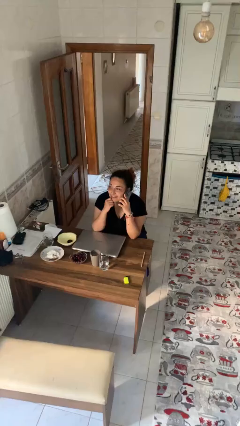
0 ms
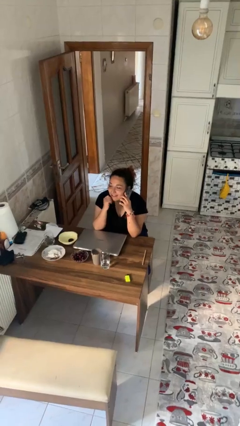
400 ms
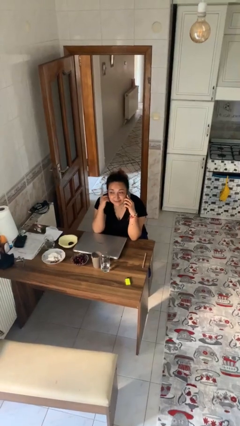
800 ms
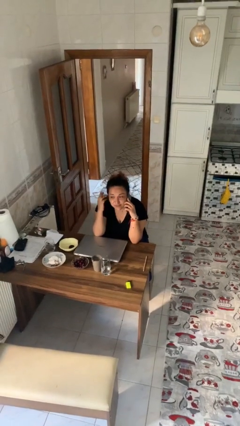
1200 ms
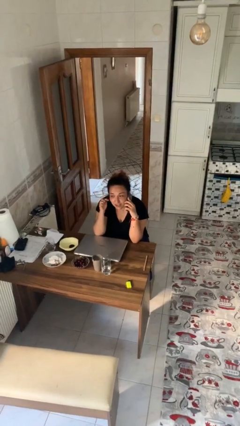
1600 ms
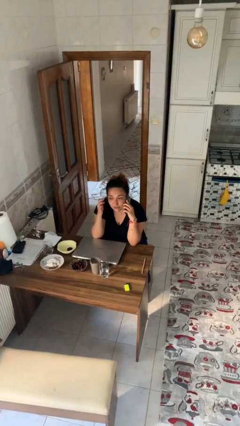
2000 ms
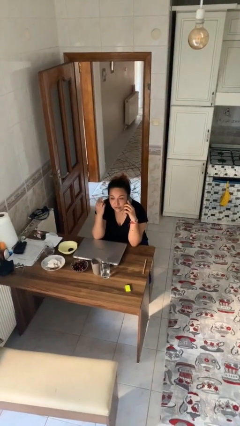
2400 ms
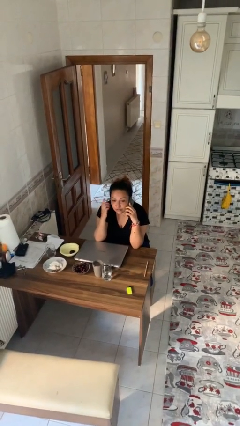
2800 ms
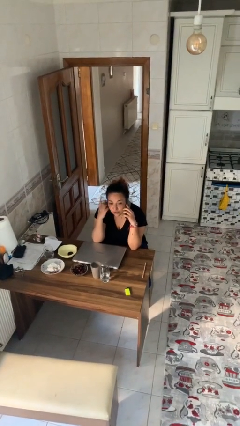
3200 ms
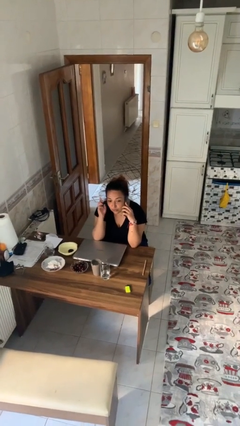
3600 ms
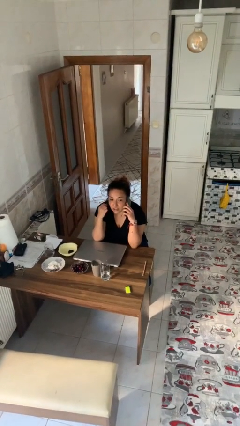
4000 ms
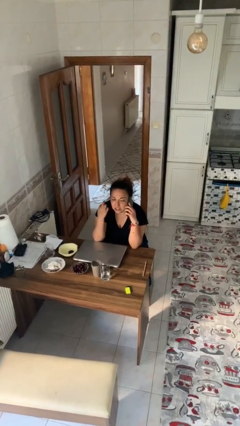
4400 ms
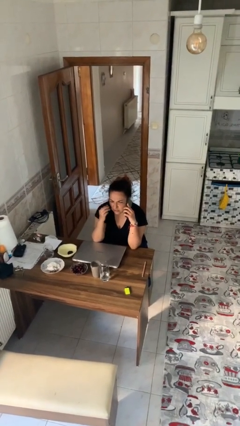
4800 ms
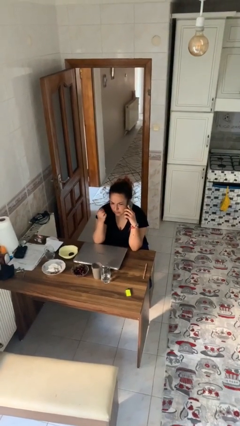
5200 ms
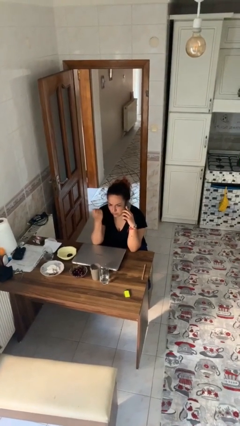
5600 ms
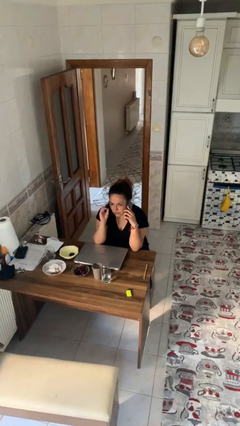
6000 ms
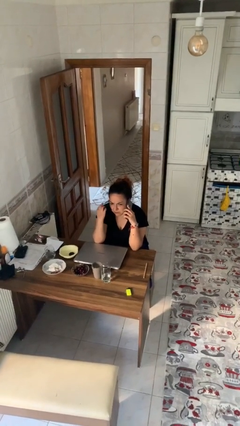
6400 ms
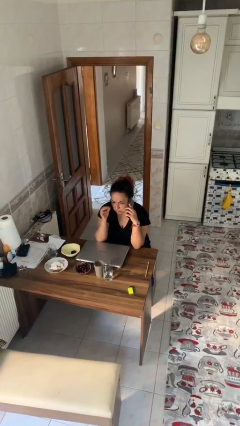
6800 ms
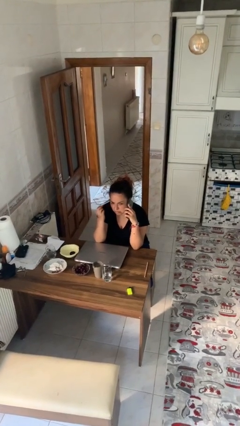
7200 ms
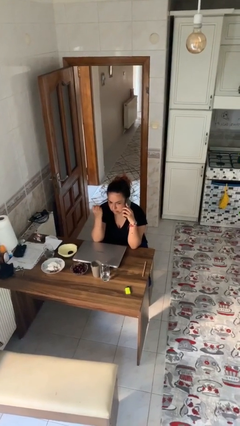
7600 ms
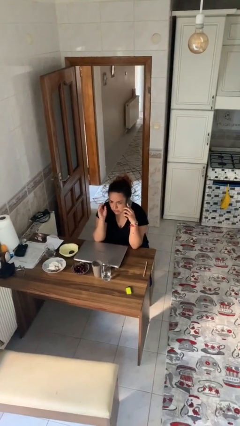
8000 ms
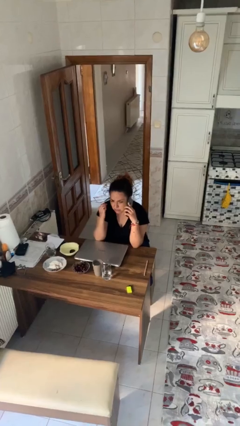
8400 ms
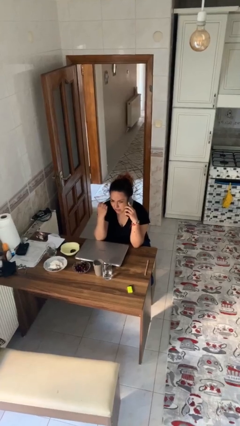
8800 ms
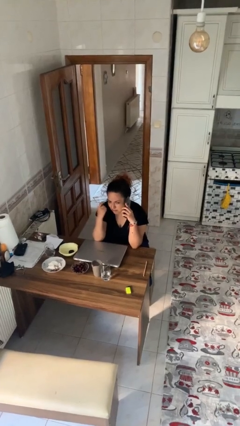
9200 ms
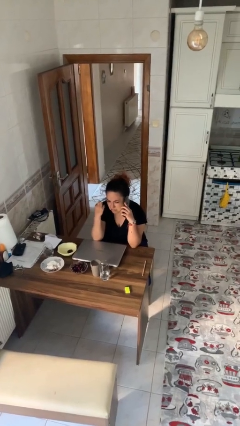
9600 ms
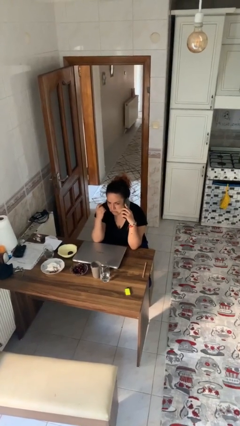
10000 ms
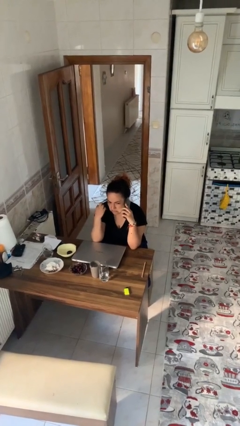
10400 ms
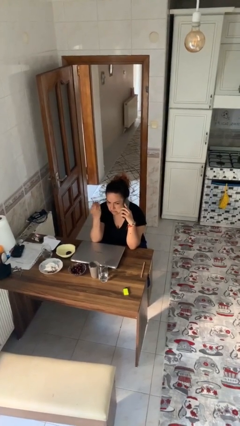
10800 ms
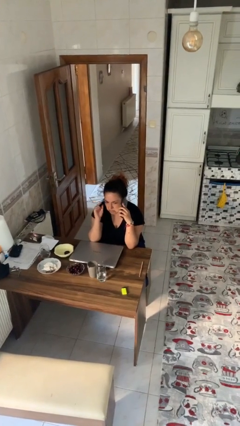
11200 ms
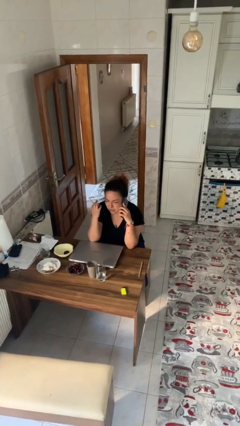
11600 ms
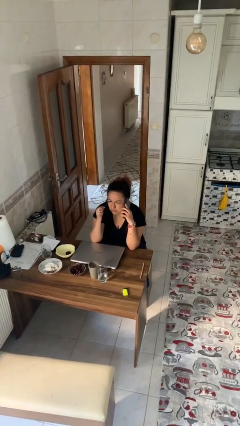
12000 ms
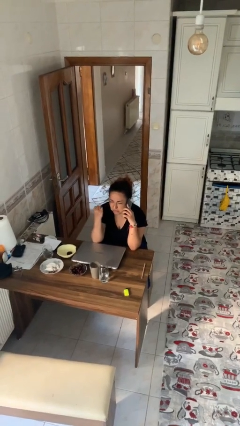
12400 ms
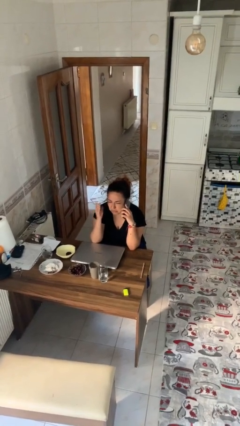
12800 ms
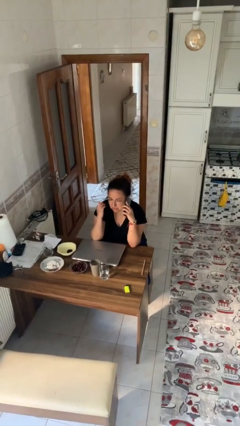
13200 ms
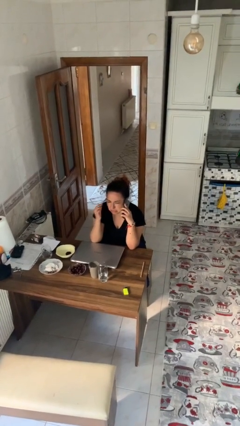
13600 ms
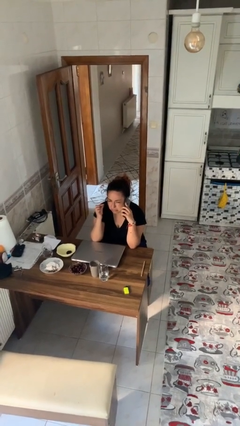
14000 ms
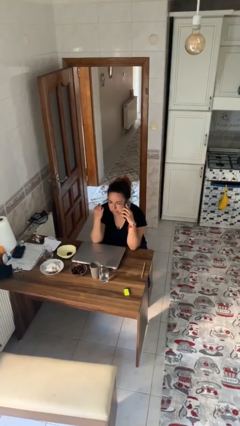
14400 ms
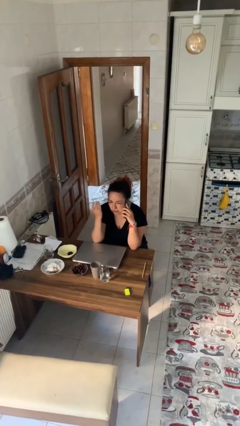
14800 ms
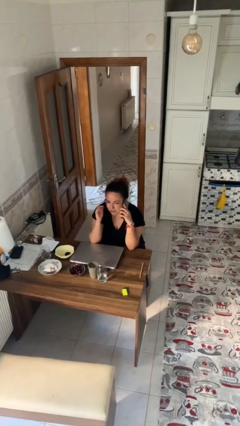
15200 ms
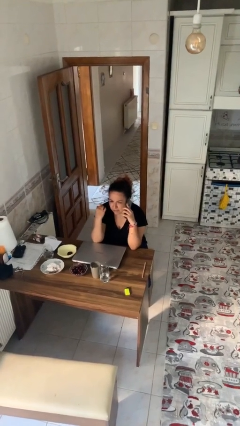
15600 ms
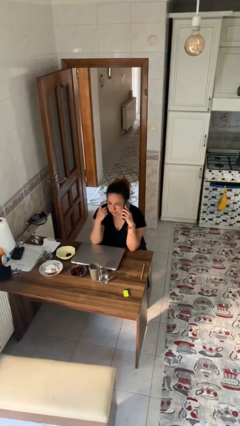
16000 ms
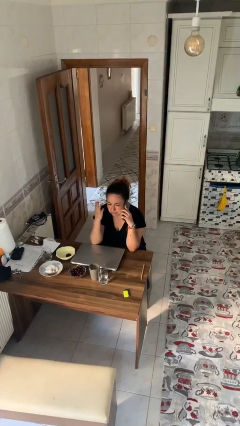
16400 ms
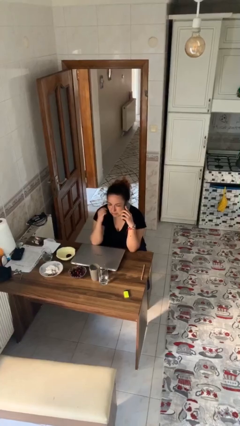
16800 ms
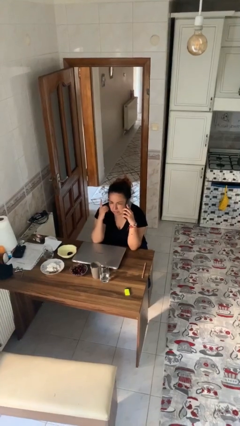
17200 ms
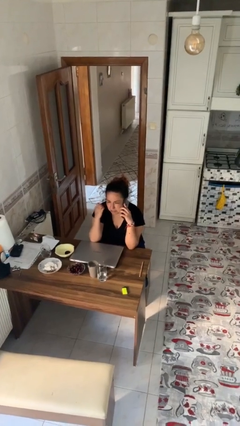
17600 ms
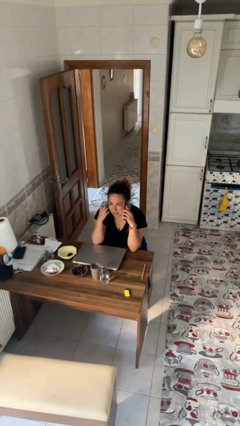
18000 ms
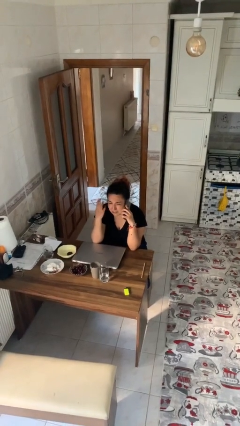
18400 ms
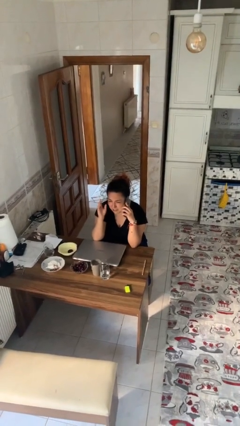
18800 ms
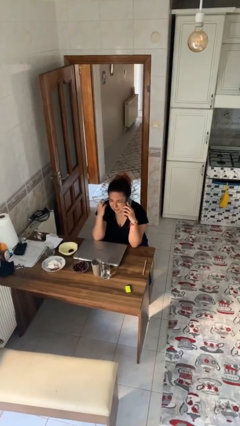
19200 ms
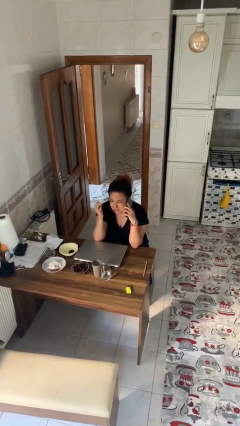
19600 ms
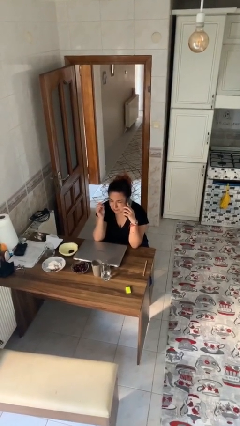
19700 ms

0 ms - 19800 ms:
person talks on phone

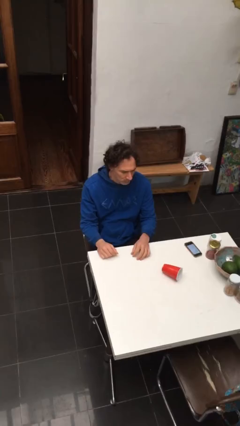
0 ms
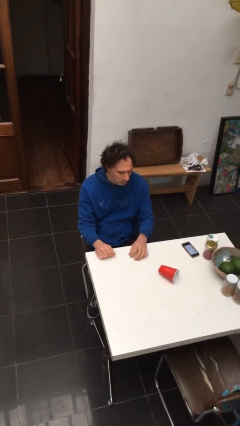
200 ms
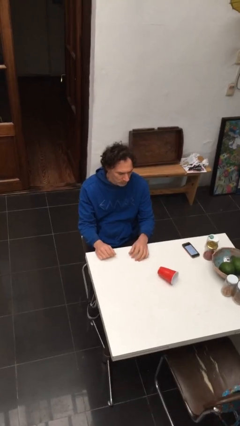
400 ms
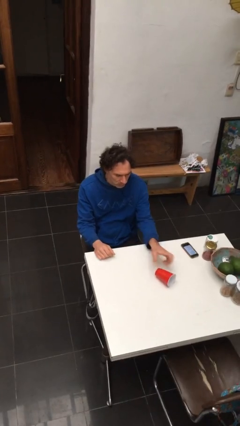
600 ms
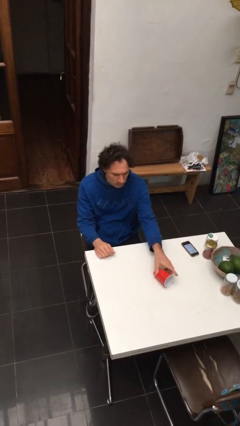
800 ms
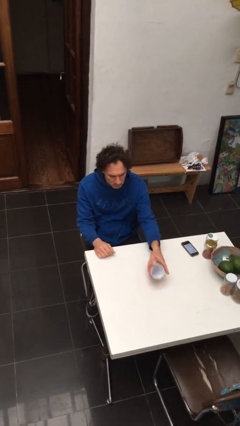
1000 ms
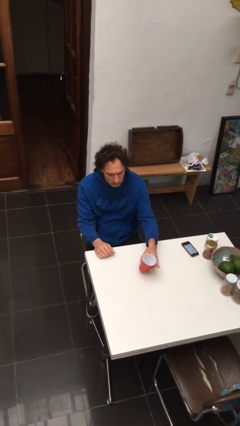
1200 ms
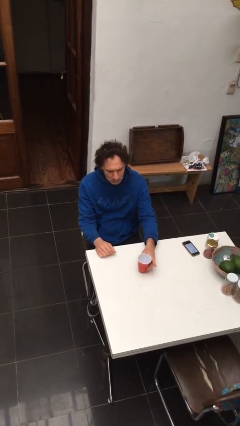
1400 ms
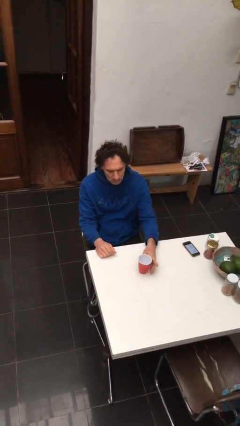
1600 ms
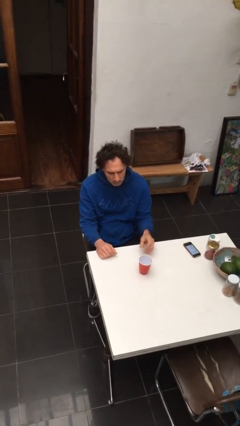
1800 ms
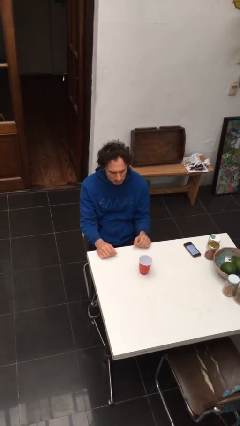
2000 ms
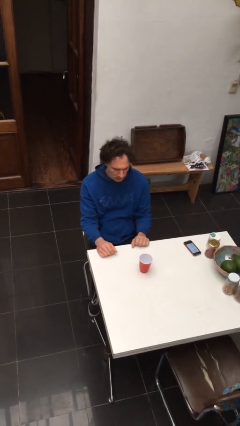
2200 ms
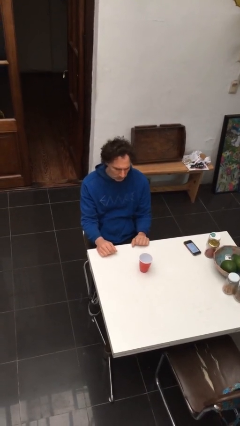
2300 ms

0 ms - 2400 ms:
person sets upright glass

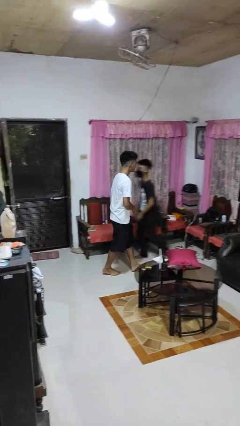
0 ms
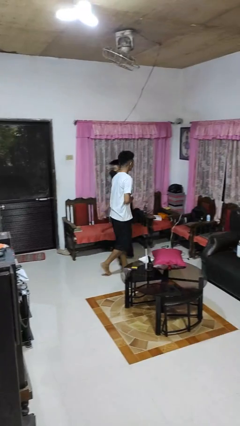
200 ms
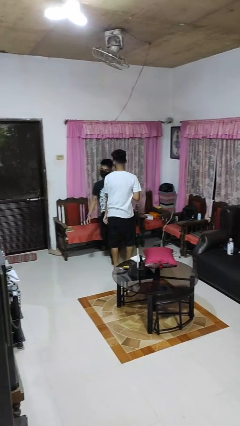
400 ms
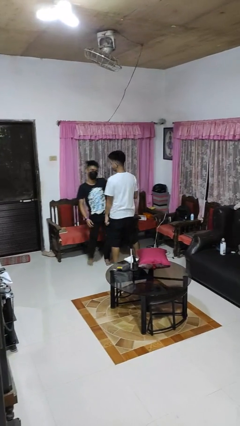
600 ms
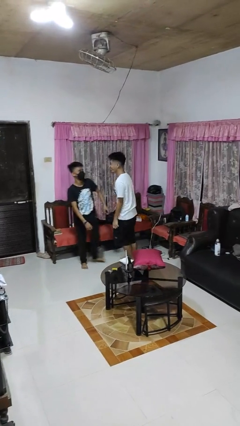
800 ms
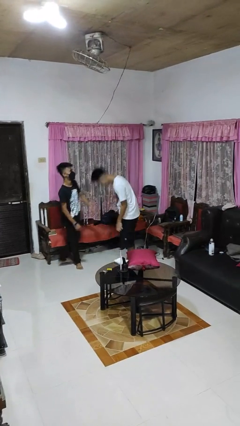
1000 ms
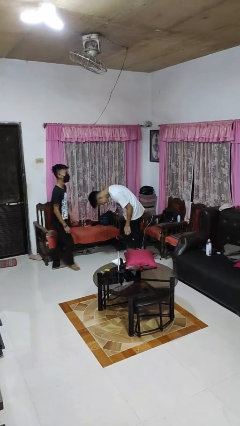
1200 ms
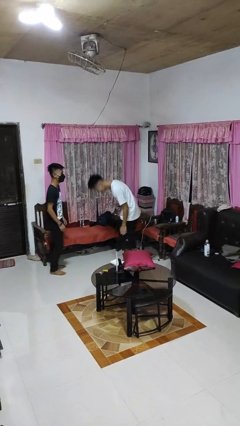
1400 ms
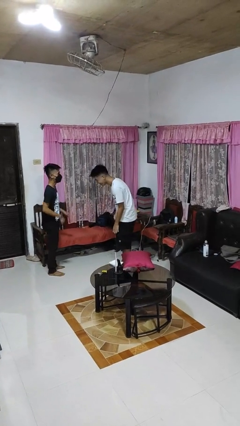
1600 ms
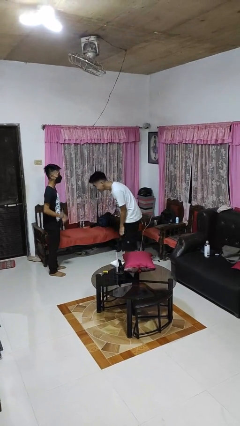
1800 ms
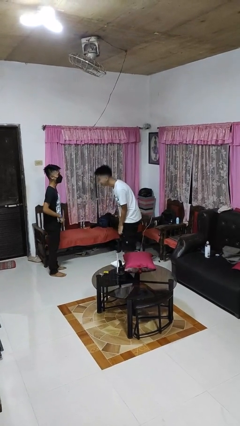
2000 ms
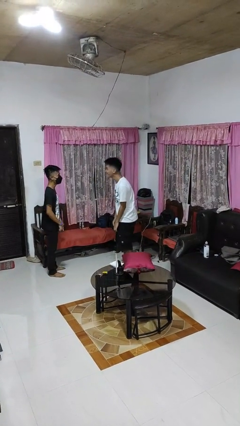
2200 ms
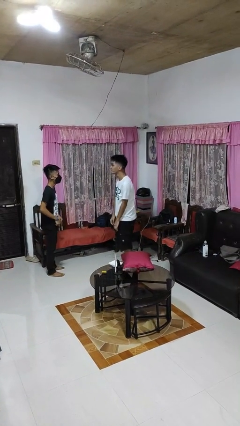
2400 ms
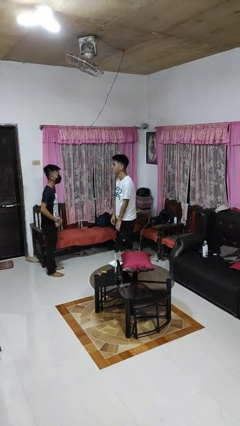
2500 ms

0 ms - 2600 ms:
person bumps into person

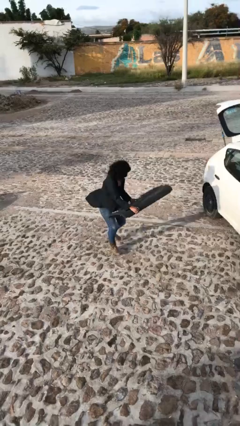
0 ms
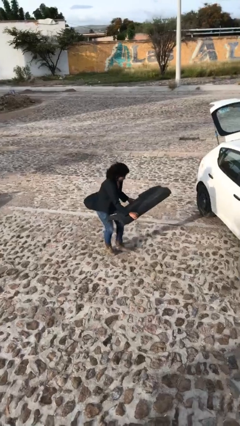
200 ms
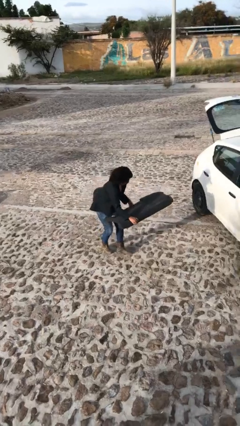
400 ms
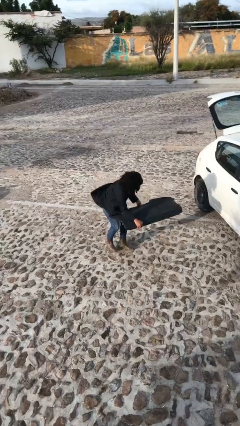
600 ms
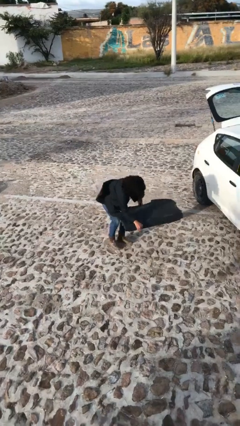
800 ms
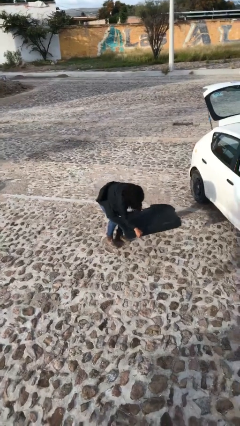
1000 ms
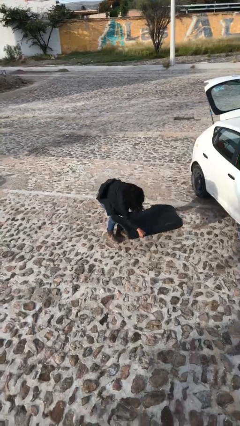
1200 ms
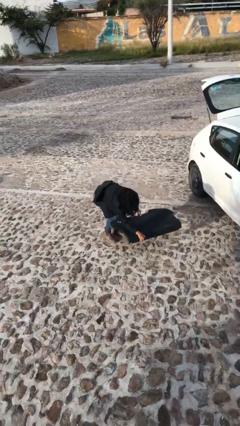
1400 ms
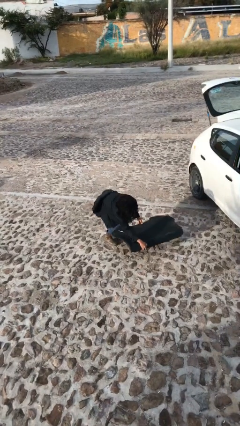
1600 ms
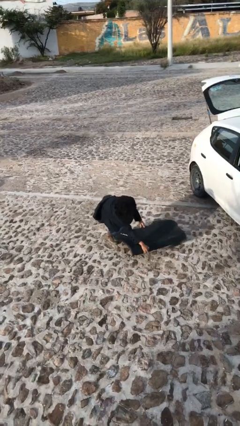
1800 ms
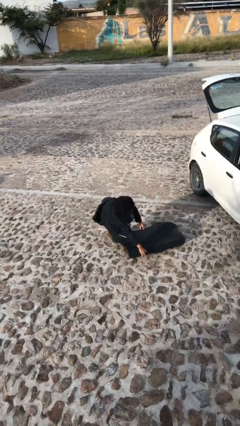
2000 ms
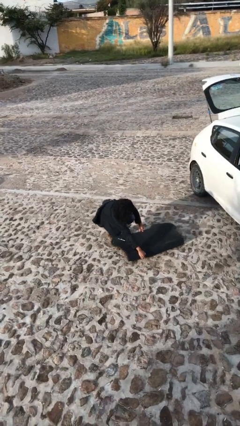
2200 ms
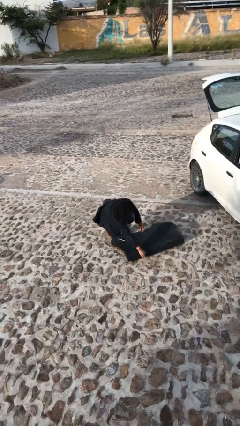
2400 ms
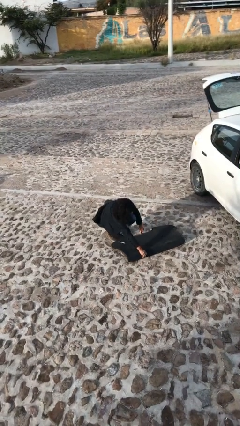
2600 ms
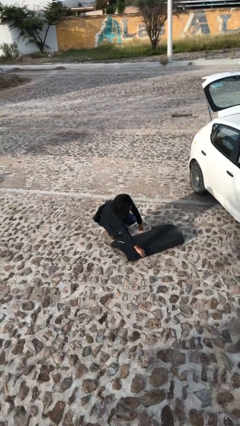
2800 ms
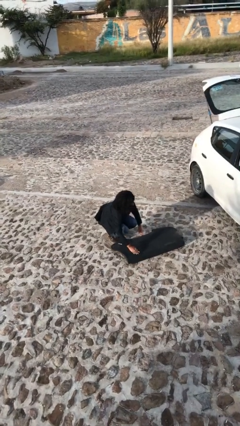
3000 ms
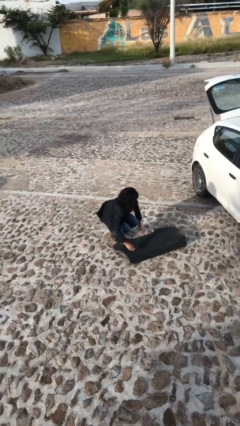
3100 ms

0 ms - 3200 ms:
person puts down object on floor
